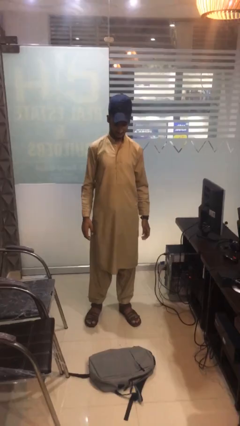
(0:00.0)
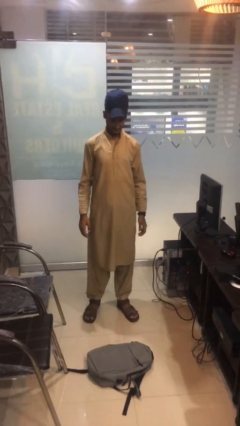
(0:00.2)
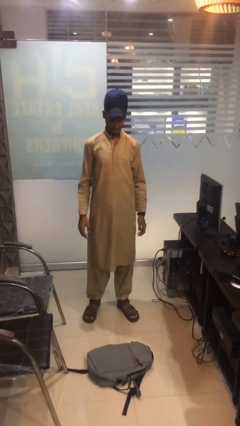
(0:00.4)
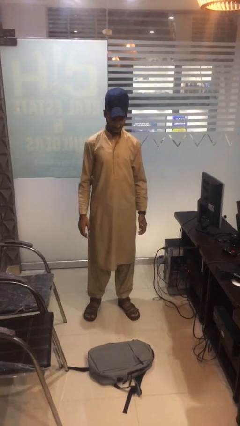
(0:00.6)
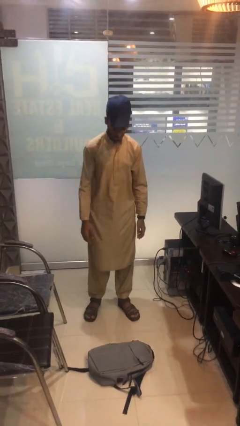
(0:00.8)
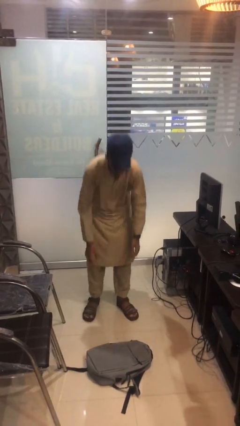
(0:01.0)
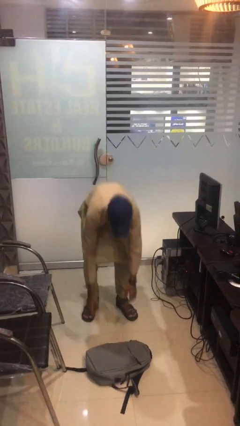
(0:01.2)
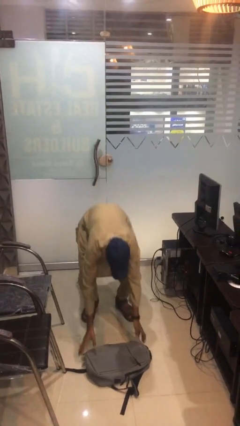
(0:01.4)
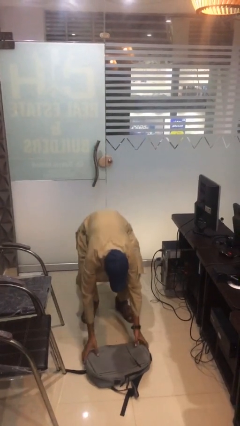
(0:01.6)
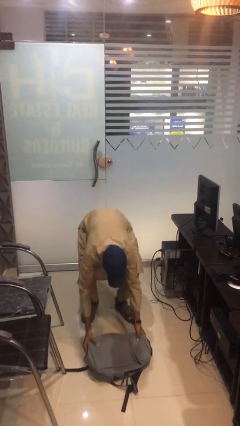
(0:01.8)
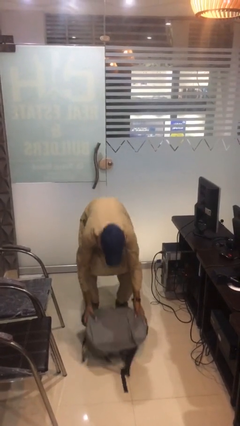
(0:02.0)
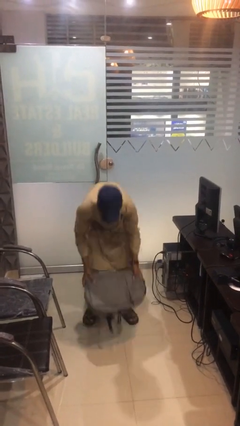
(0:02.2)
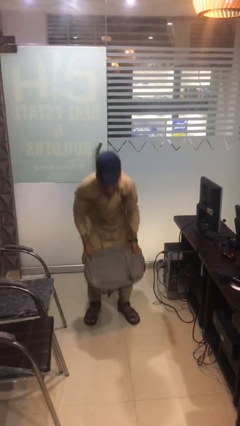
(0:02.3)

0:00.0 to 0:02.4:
person picks up object from floor

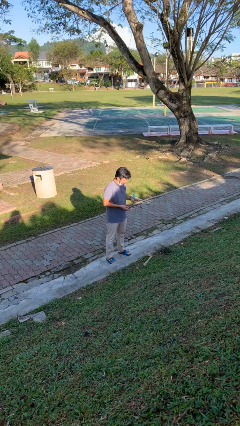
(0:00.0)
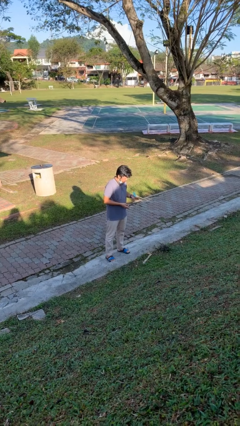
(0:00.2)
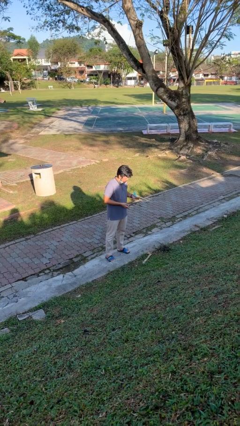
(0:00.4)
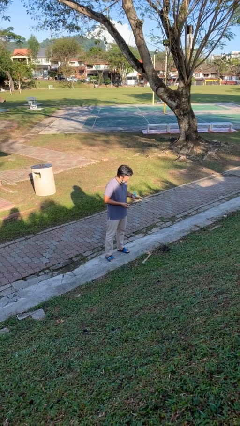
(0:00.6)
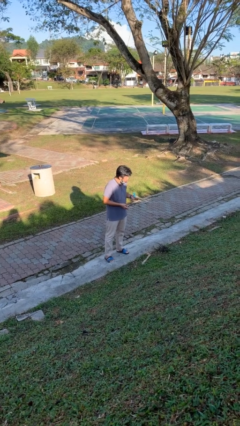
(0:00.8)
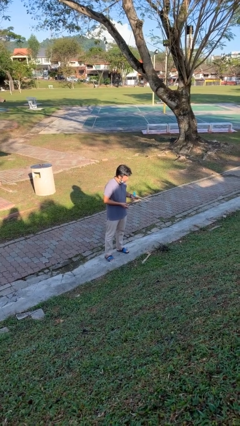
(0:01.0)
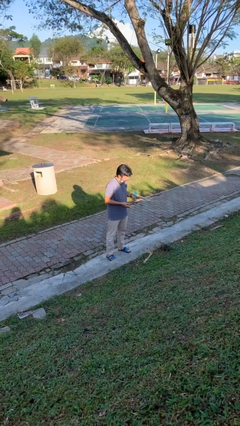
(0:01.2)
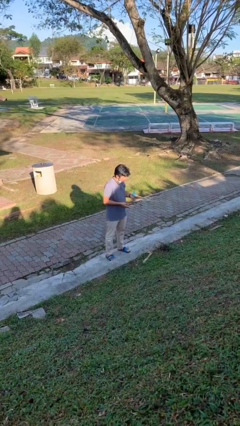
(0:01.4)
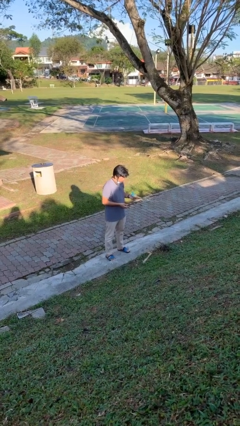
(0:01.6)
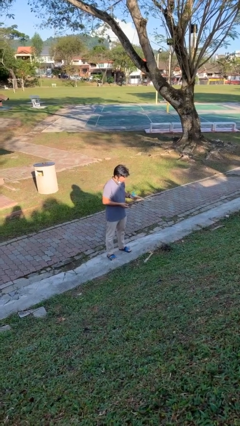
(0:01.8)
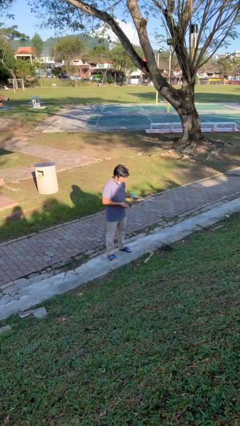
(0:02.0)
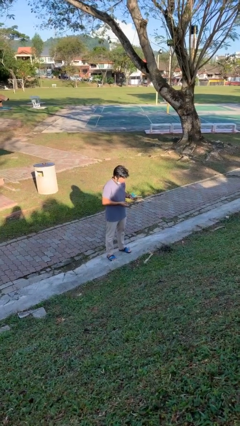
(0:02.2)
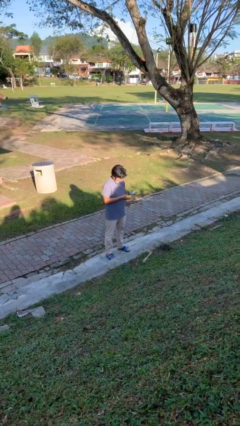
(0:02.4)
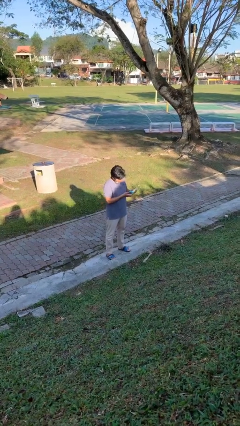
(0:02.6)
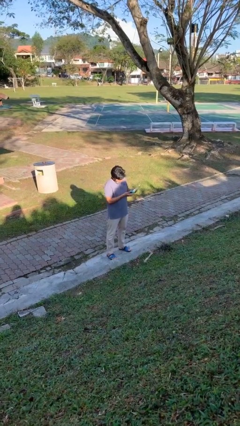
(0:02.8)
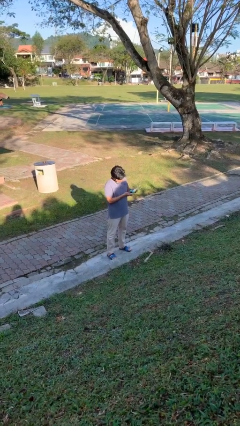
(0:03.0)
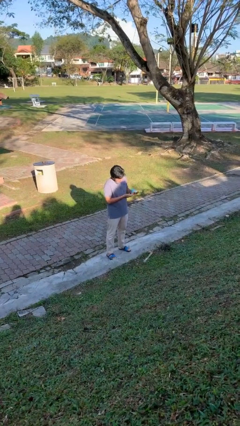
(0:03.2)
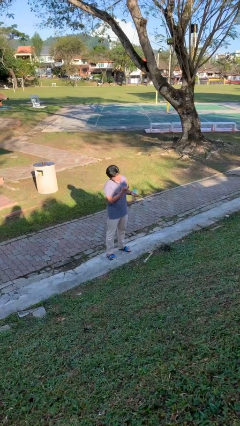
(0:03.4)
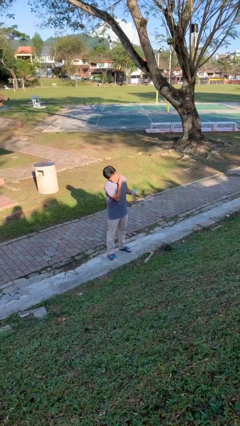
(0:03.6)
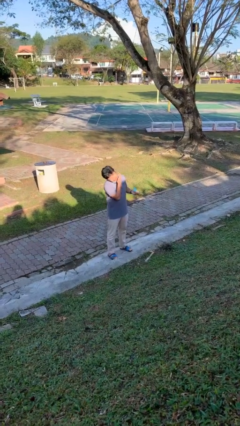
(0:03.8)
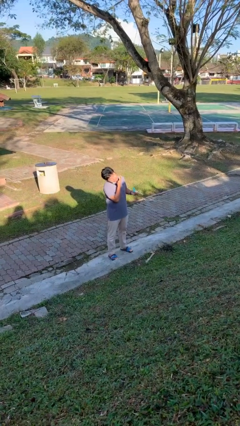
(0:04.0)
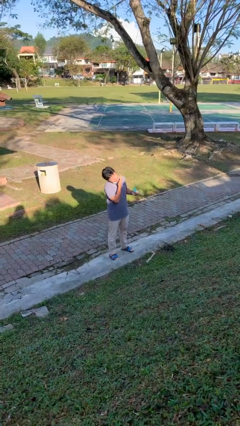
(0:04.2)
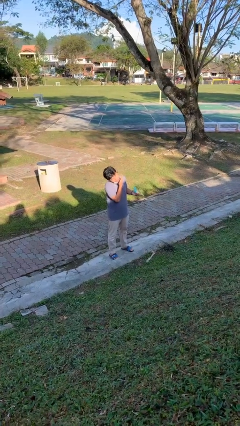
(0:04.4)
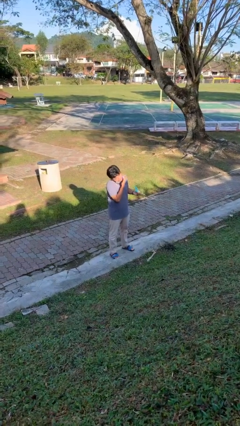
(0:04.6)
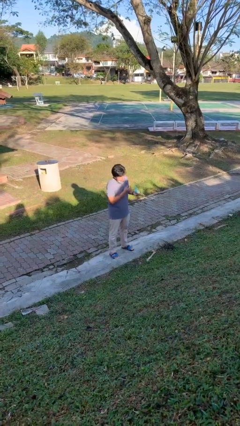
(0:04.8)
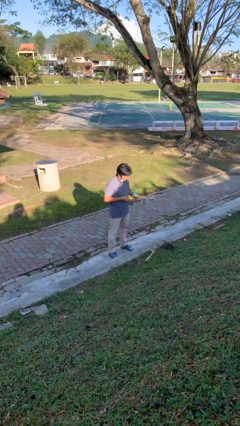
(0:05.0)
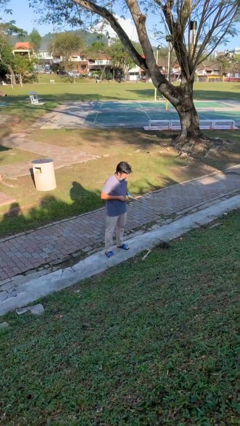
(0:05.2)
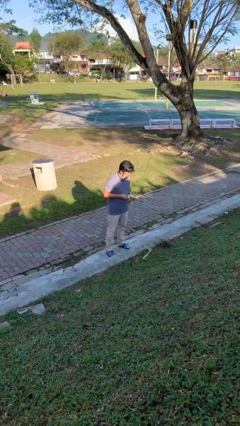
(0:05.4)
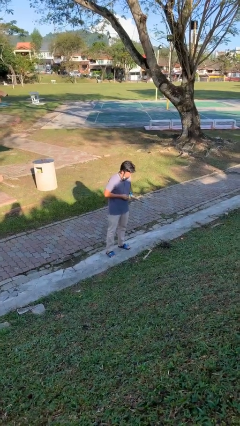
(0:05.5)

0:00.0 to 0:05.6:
person applies facial moisturizer

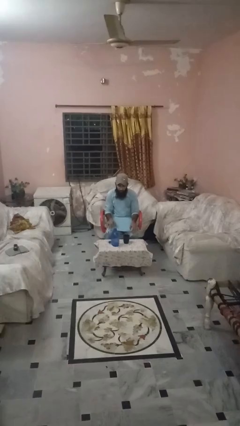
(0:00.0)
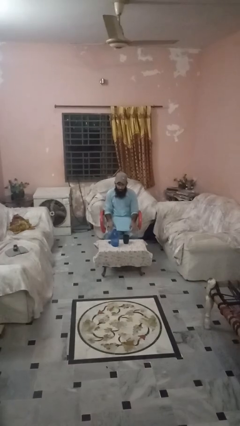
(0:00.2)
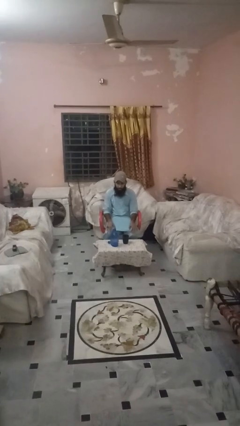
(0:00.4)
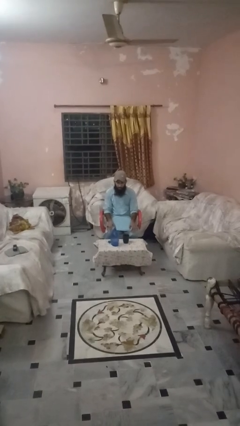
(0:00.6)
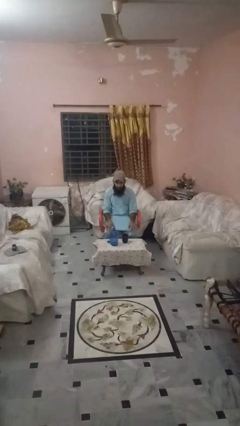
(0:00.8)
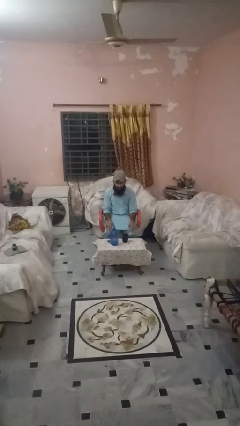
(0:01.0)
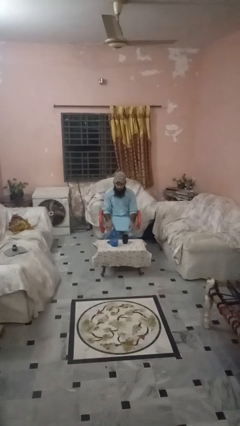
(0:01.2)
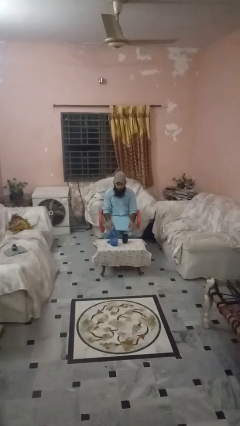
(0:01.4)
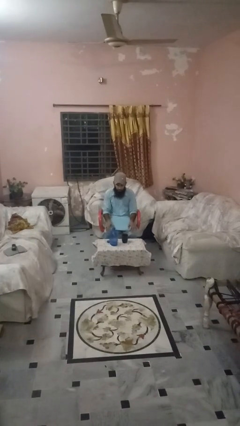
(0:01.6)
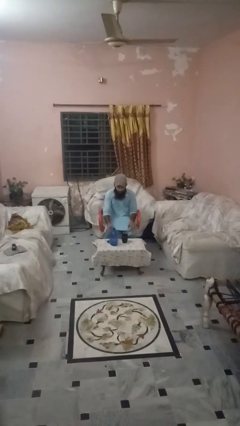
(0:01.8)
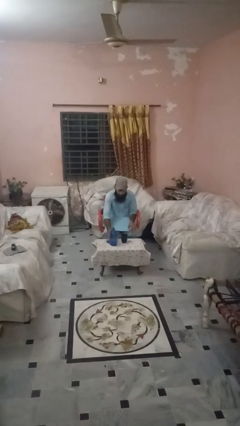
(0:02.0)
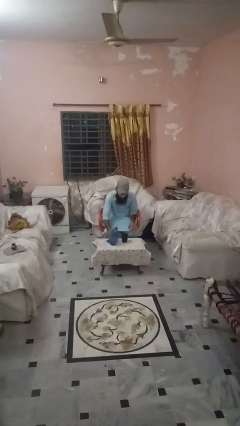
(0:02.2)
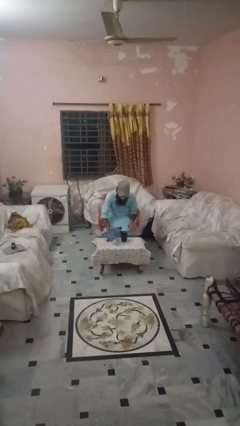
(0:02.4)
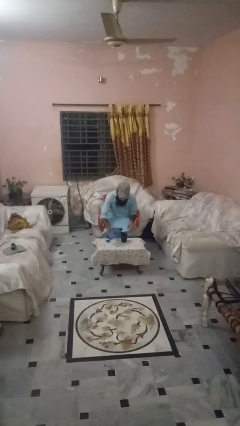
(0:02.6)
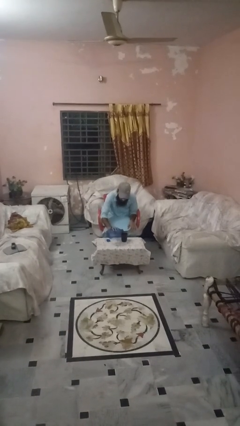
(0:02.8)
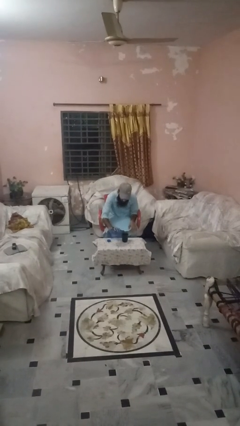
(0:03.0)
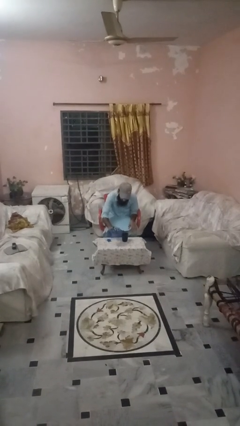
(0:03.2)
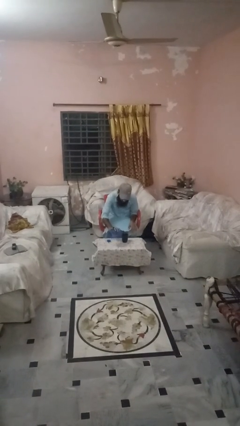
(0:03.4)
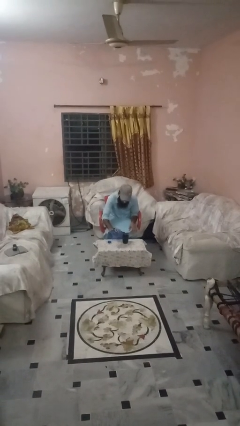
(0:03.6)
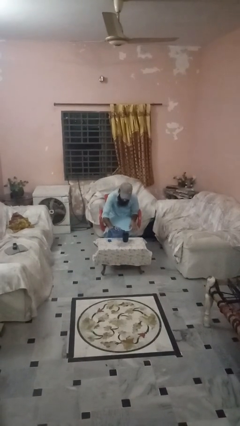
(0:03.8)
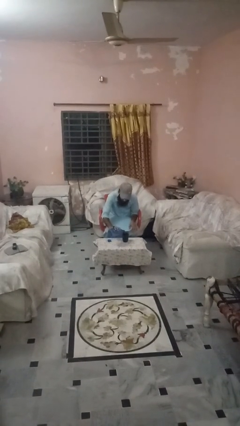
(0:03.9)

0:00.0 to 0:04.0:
person pours liquid into cup

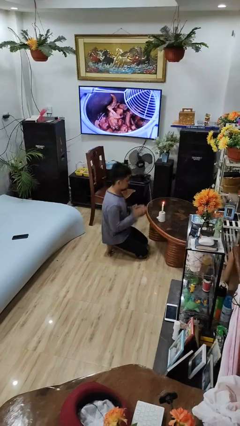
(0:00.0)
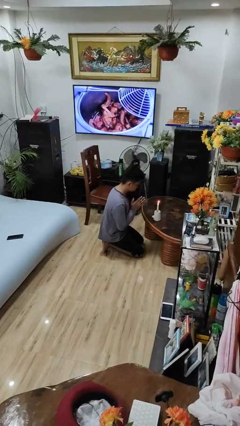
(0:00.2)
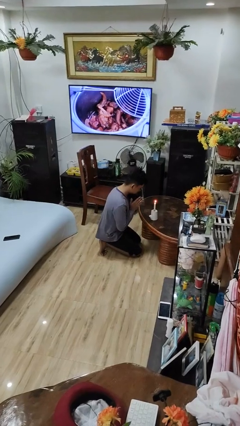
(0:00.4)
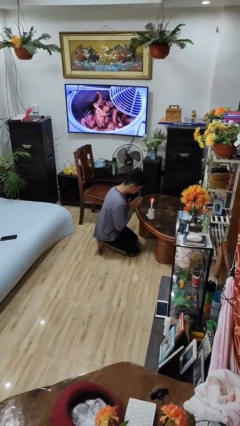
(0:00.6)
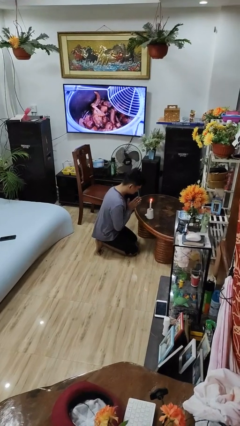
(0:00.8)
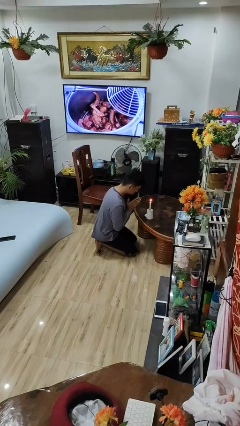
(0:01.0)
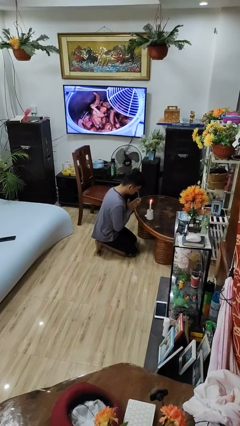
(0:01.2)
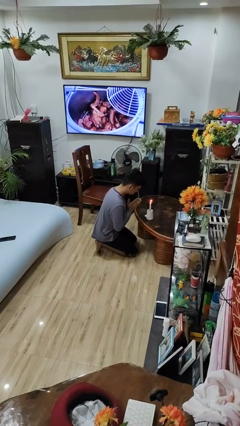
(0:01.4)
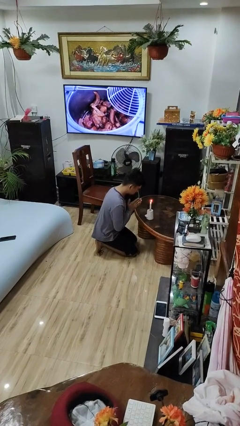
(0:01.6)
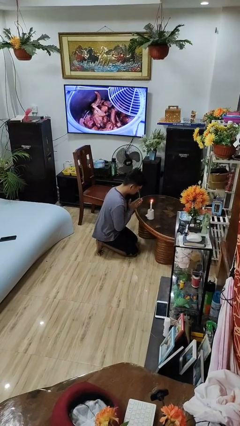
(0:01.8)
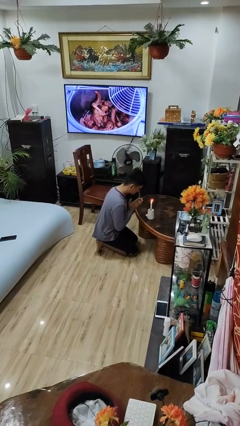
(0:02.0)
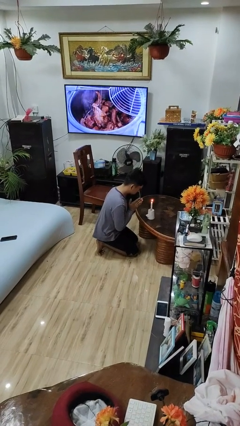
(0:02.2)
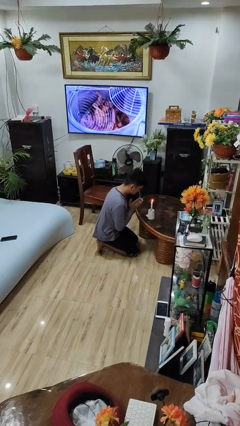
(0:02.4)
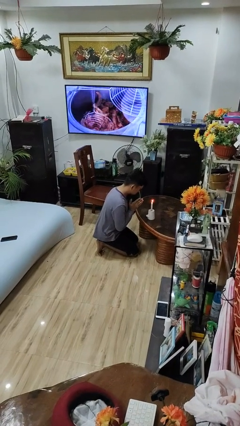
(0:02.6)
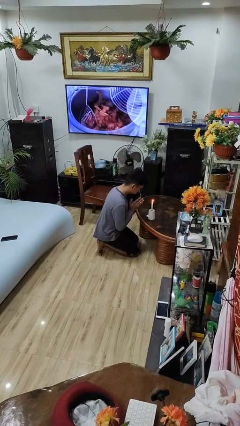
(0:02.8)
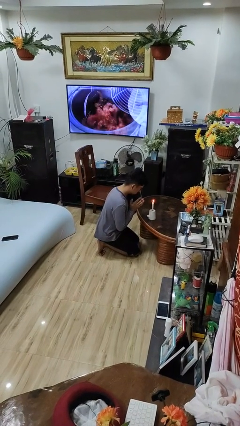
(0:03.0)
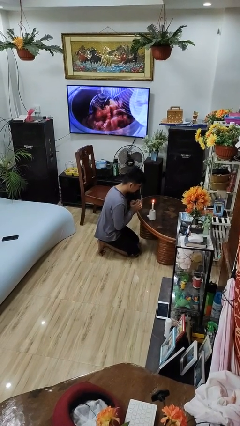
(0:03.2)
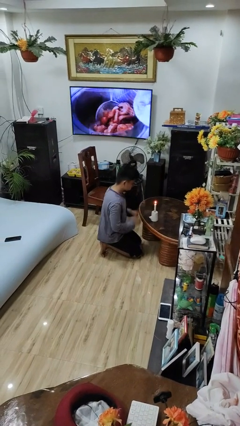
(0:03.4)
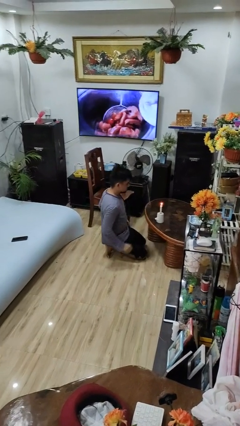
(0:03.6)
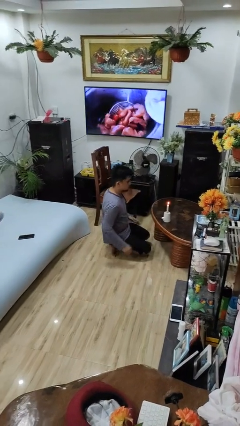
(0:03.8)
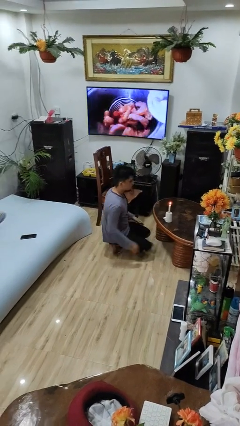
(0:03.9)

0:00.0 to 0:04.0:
person prays

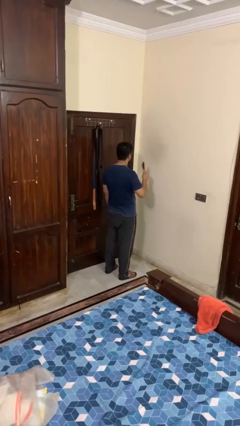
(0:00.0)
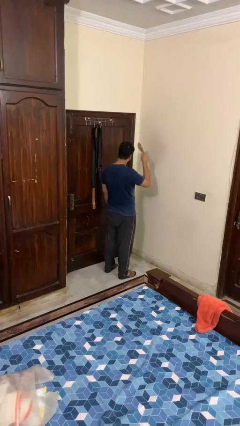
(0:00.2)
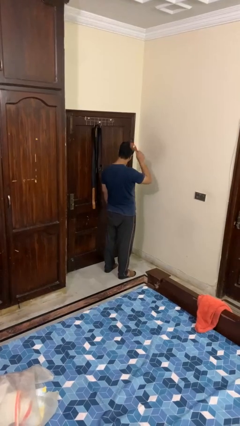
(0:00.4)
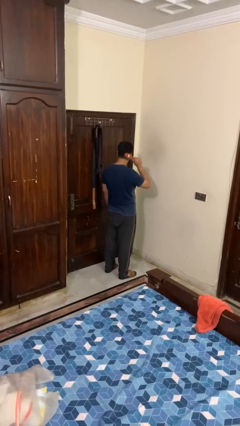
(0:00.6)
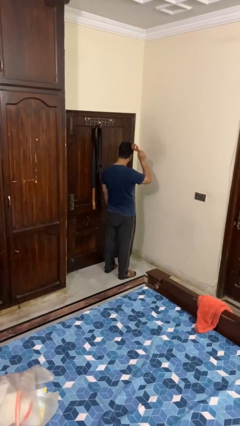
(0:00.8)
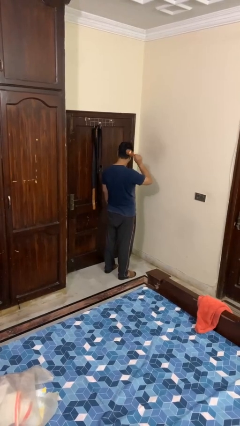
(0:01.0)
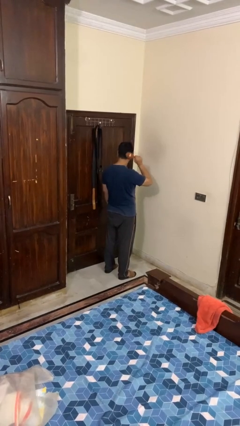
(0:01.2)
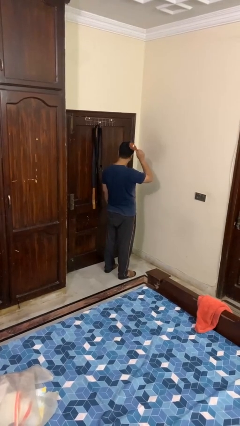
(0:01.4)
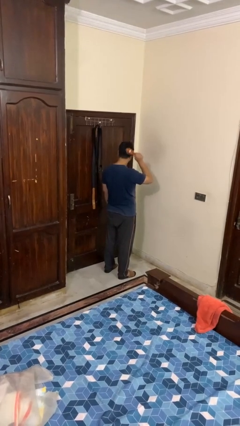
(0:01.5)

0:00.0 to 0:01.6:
person brushes hair

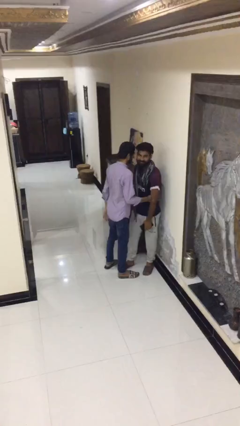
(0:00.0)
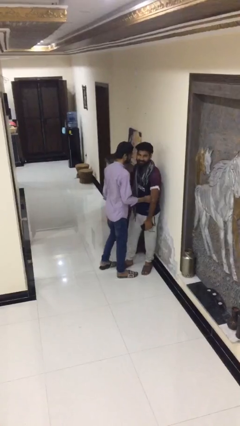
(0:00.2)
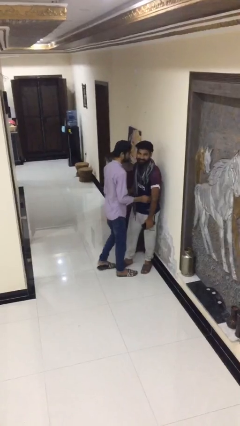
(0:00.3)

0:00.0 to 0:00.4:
person talks to person
